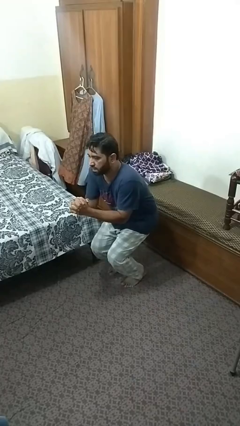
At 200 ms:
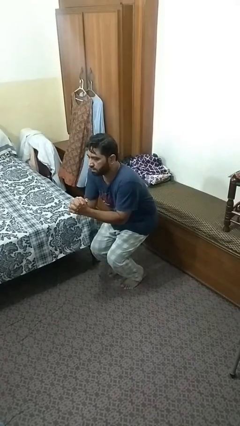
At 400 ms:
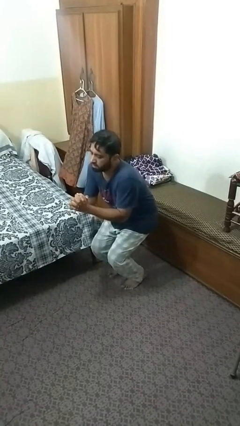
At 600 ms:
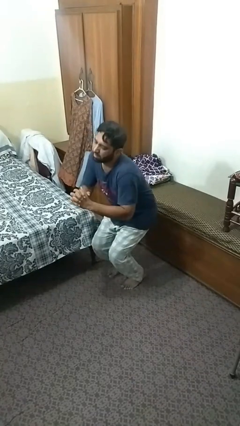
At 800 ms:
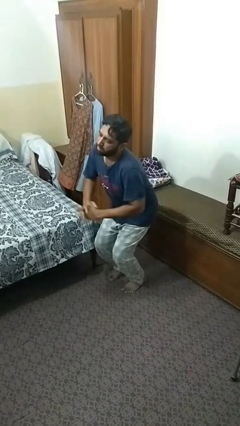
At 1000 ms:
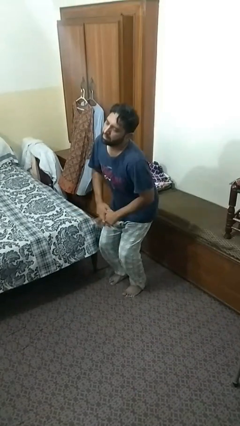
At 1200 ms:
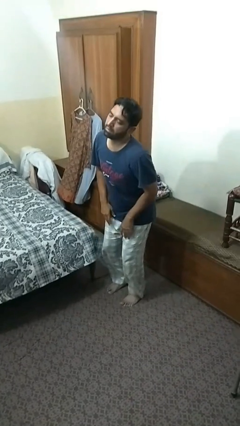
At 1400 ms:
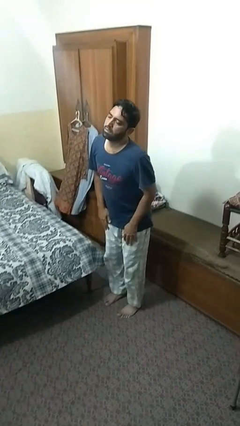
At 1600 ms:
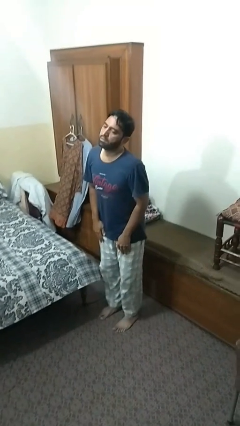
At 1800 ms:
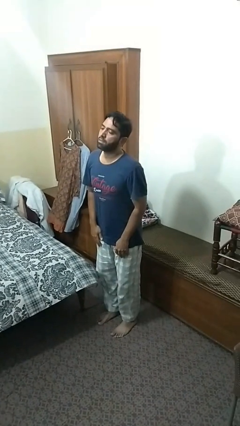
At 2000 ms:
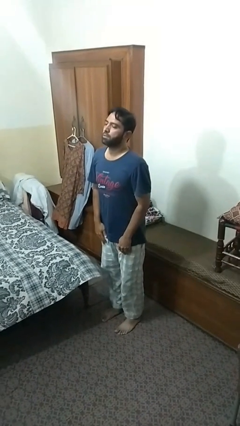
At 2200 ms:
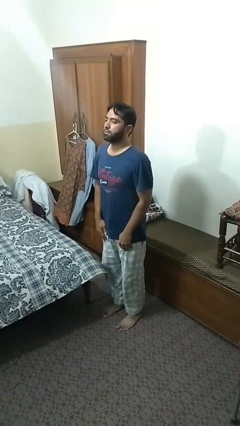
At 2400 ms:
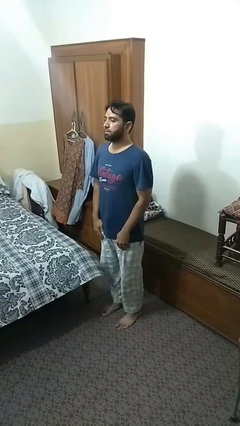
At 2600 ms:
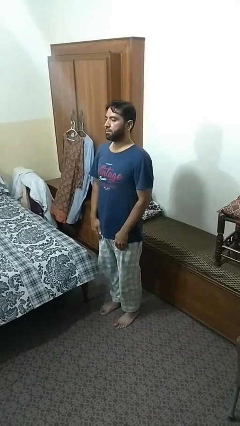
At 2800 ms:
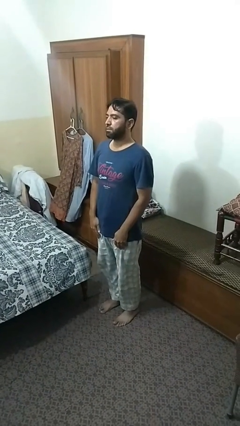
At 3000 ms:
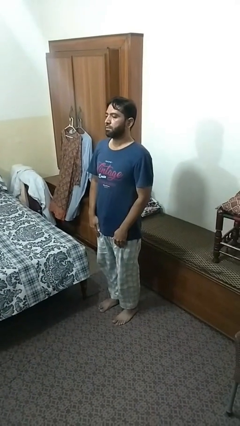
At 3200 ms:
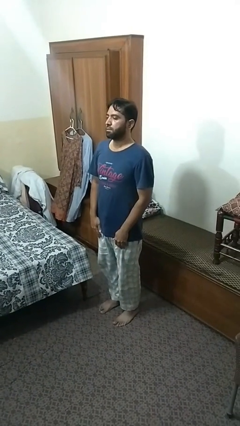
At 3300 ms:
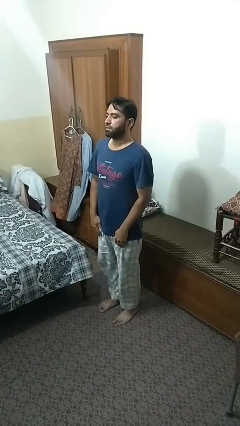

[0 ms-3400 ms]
person stands up

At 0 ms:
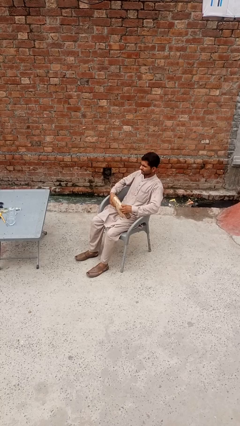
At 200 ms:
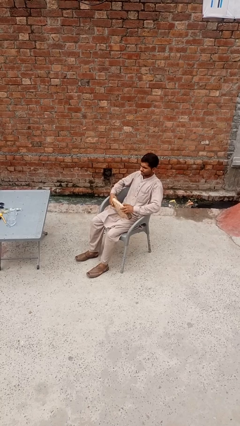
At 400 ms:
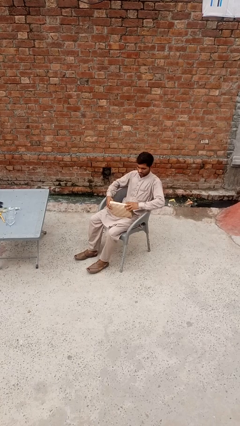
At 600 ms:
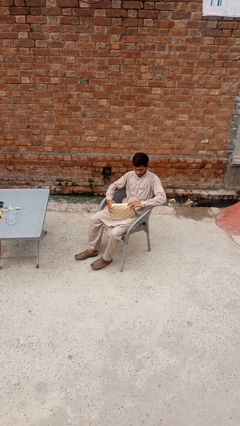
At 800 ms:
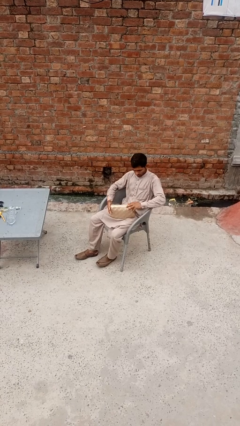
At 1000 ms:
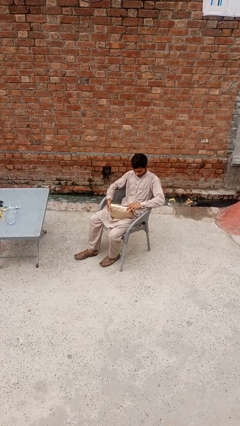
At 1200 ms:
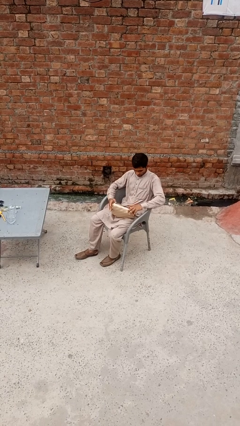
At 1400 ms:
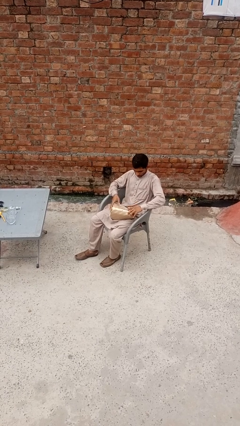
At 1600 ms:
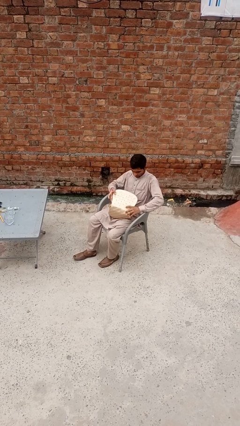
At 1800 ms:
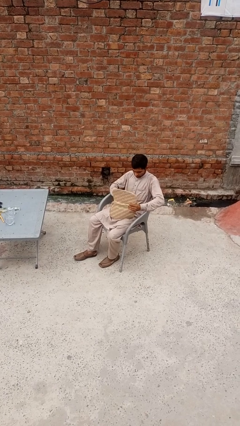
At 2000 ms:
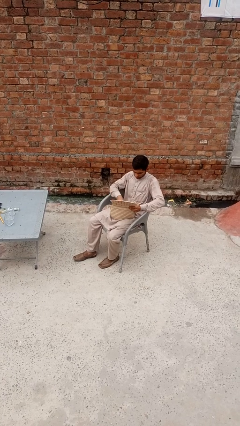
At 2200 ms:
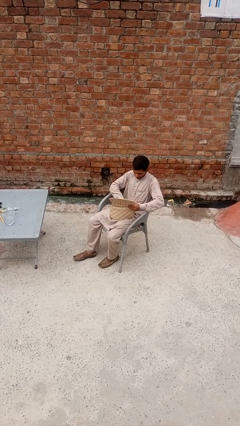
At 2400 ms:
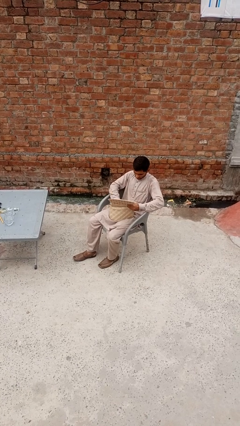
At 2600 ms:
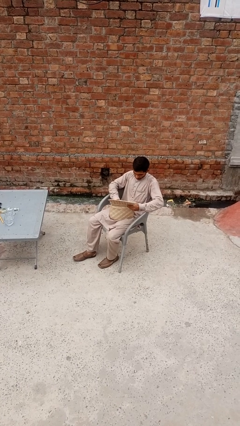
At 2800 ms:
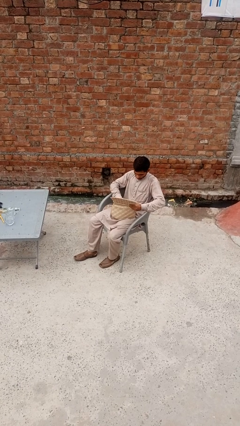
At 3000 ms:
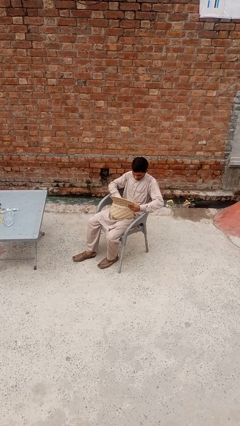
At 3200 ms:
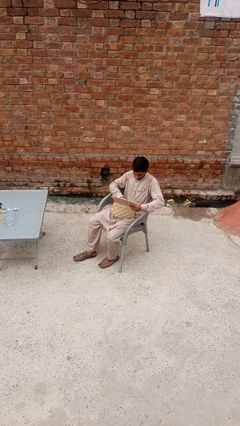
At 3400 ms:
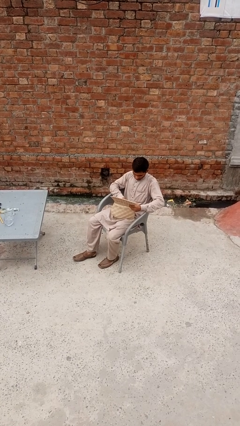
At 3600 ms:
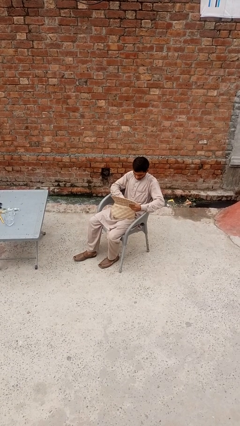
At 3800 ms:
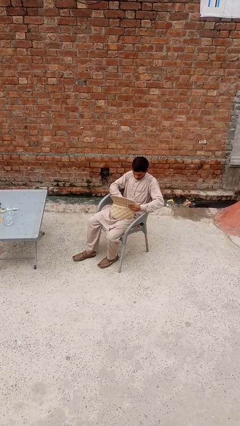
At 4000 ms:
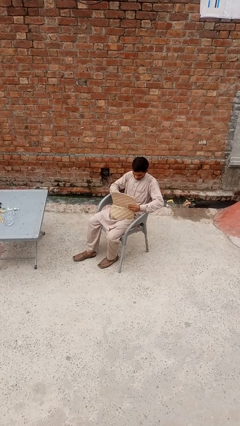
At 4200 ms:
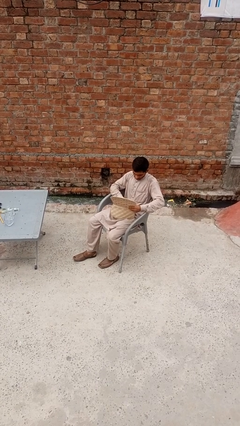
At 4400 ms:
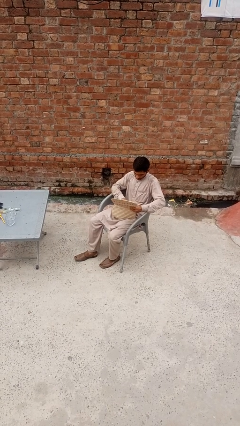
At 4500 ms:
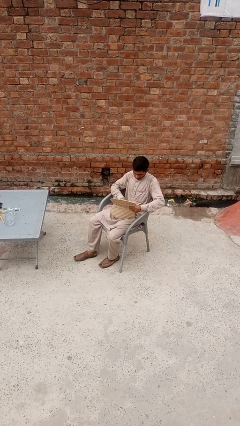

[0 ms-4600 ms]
person searches in purse

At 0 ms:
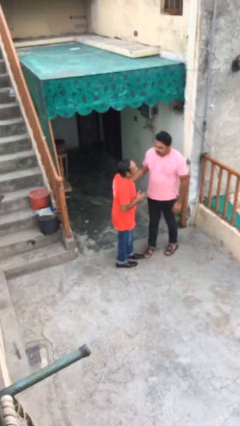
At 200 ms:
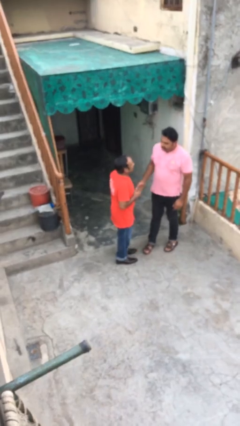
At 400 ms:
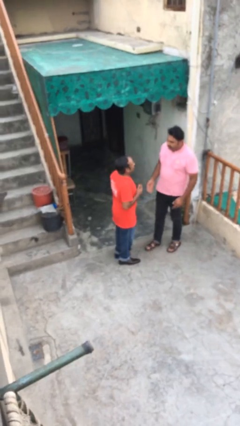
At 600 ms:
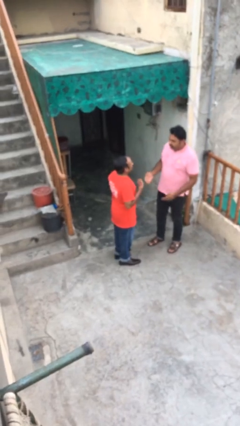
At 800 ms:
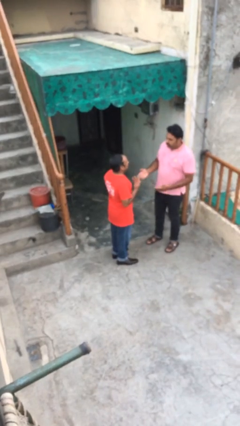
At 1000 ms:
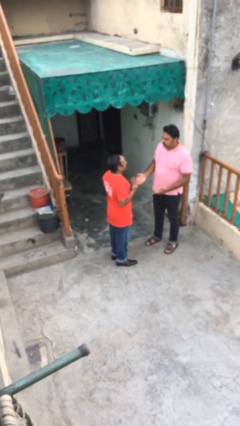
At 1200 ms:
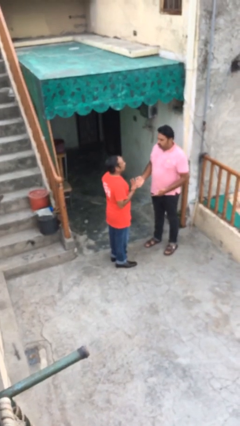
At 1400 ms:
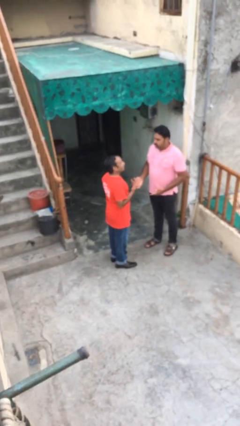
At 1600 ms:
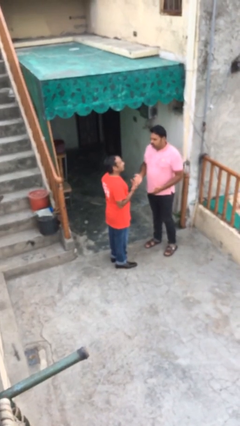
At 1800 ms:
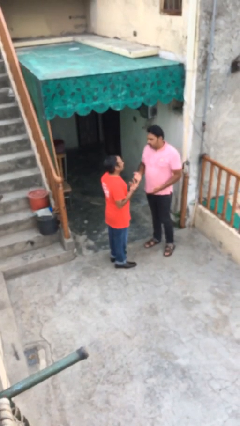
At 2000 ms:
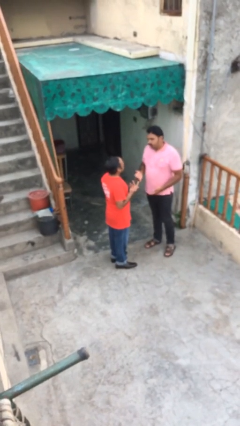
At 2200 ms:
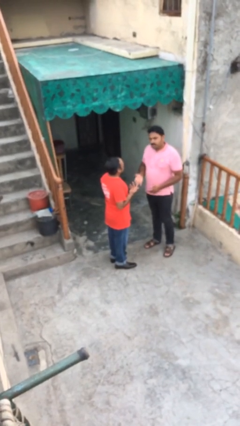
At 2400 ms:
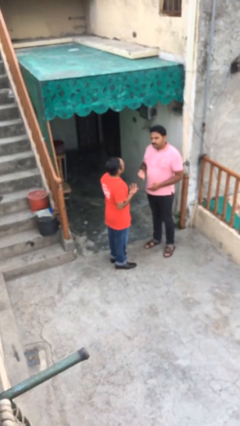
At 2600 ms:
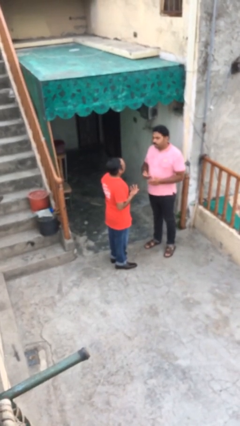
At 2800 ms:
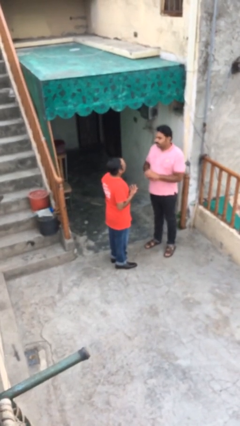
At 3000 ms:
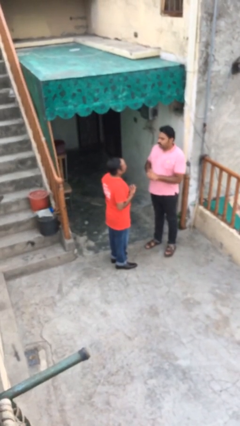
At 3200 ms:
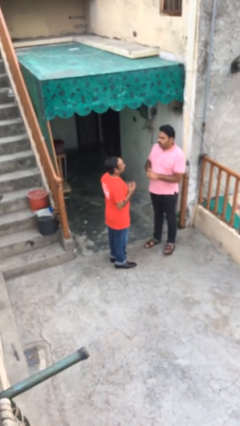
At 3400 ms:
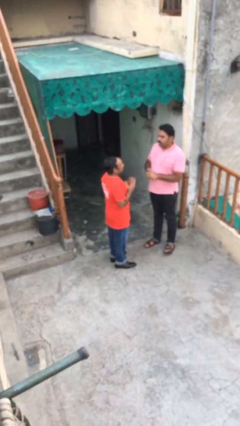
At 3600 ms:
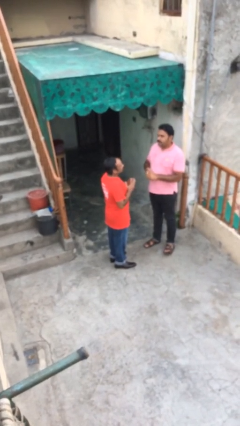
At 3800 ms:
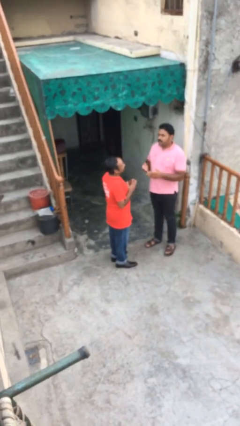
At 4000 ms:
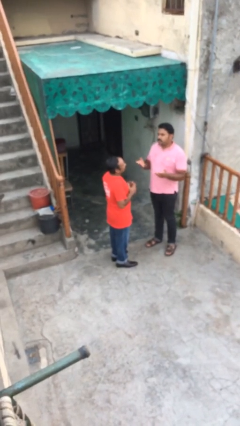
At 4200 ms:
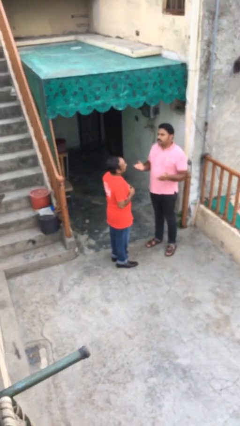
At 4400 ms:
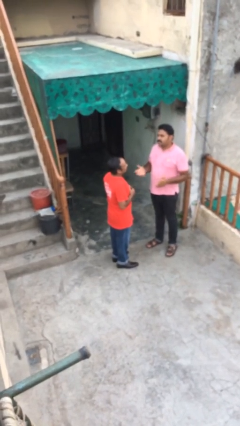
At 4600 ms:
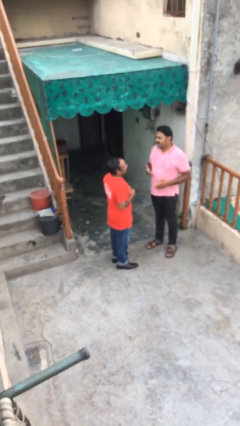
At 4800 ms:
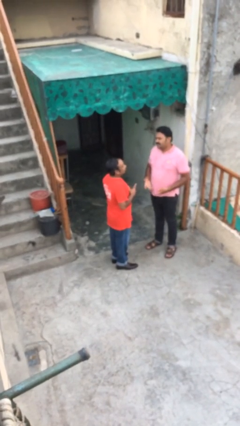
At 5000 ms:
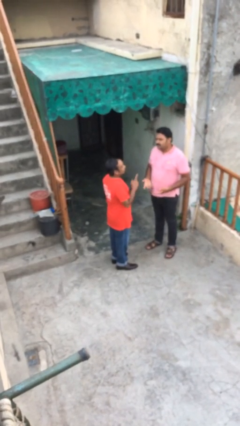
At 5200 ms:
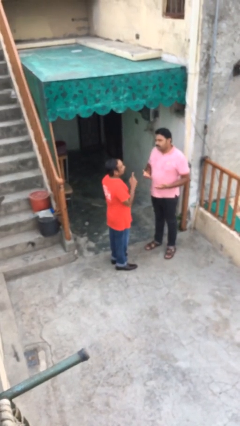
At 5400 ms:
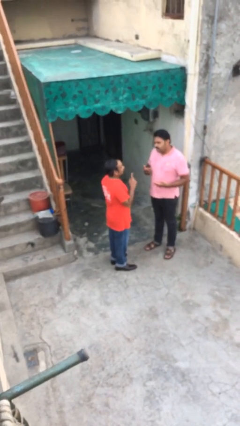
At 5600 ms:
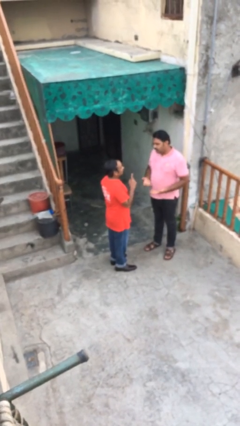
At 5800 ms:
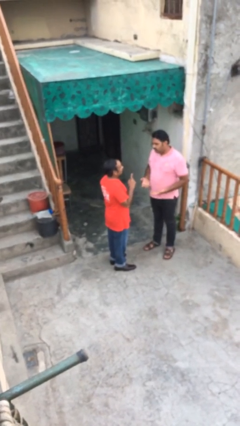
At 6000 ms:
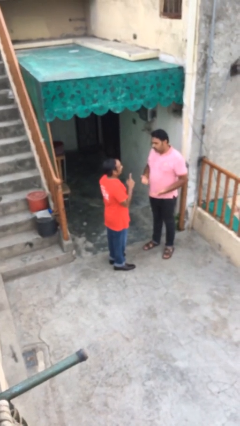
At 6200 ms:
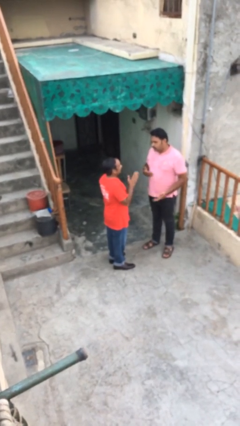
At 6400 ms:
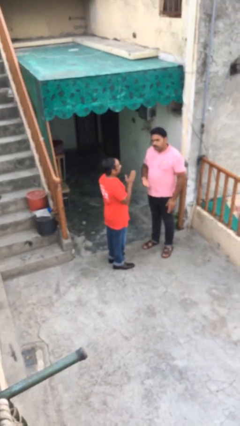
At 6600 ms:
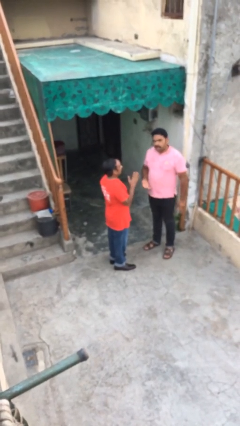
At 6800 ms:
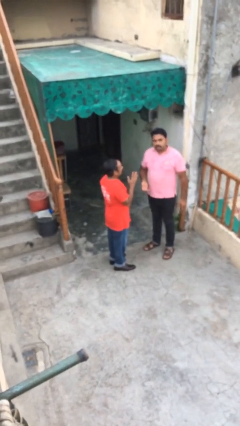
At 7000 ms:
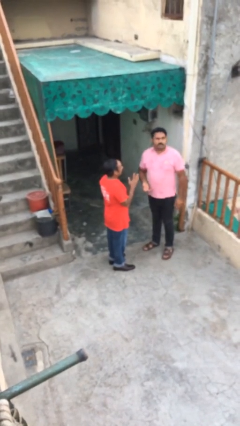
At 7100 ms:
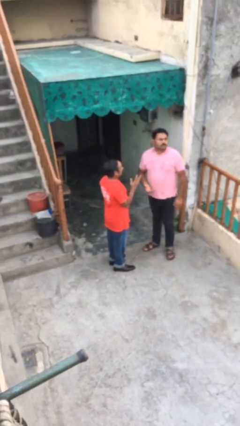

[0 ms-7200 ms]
person talks to person

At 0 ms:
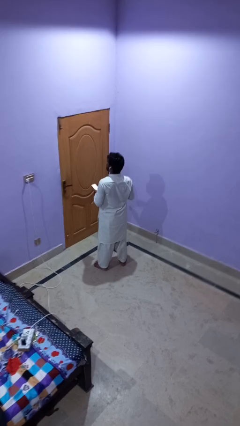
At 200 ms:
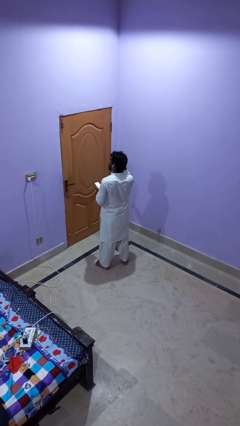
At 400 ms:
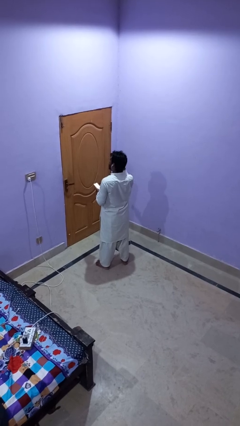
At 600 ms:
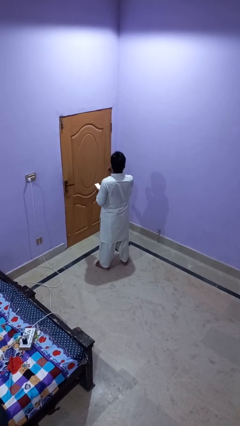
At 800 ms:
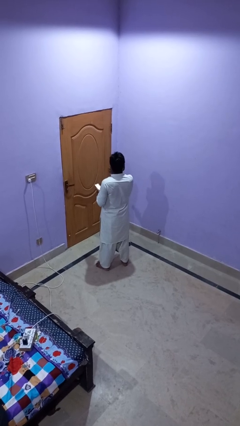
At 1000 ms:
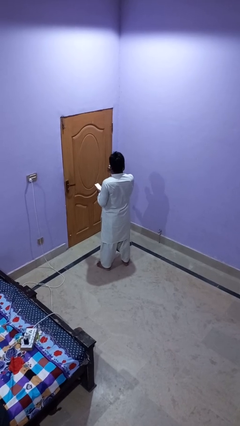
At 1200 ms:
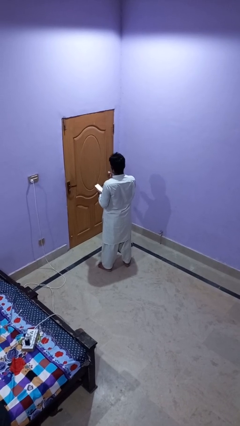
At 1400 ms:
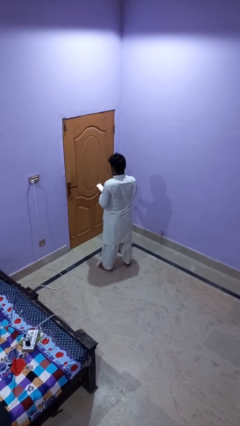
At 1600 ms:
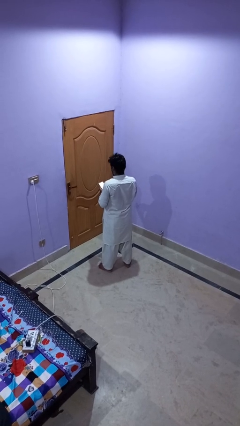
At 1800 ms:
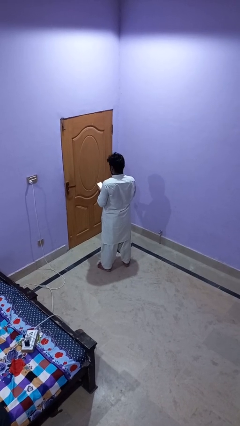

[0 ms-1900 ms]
person takes off headphones

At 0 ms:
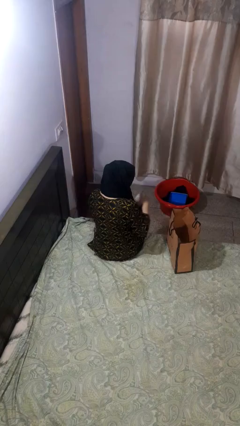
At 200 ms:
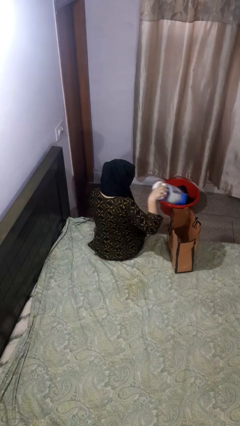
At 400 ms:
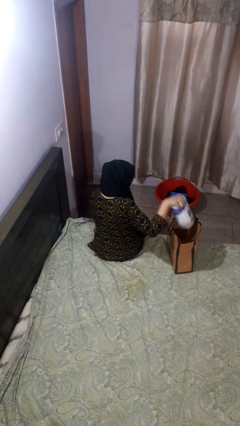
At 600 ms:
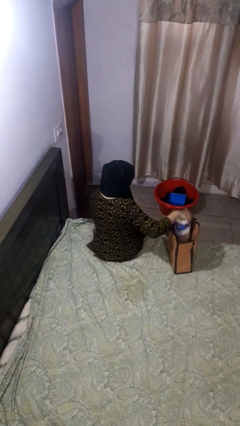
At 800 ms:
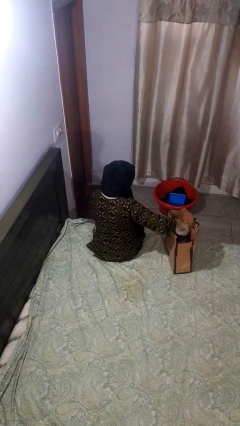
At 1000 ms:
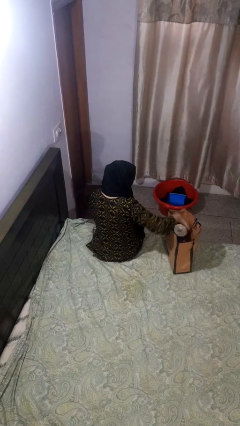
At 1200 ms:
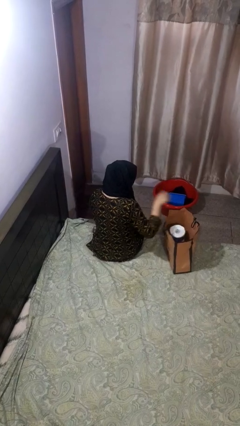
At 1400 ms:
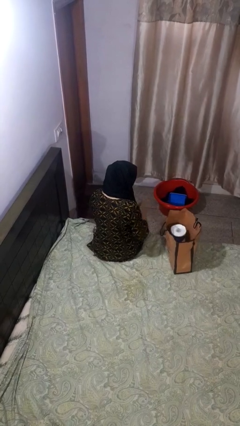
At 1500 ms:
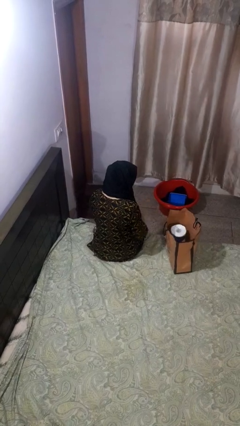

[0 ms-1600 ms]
person puts object into bag
